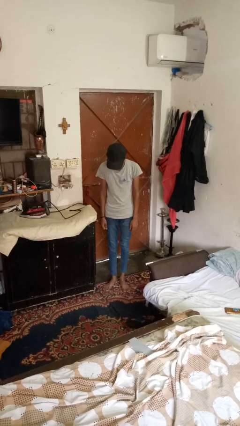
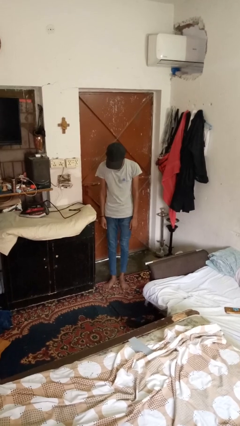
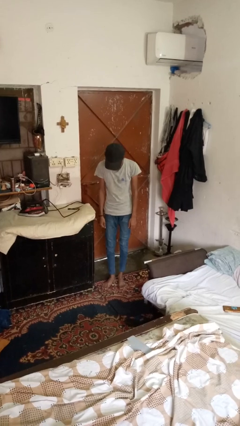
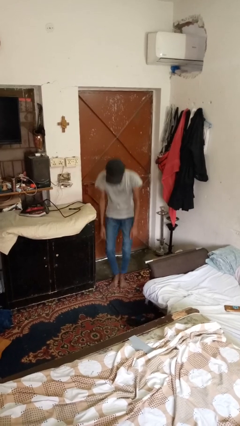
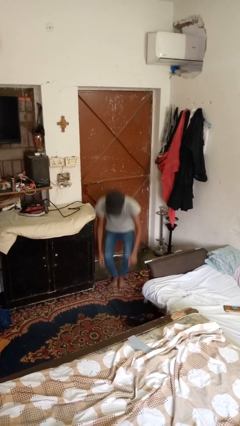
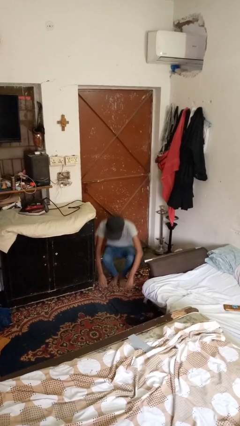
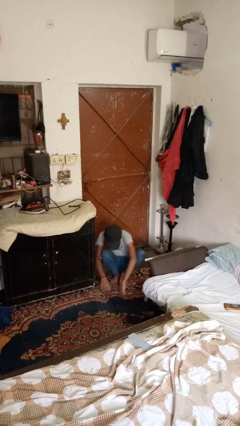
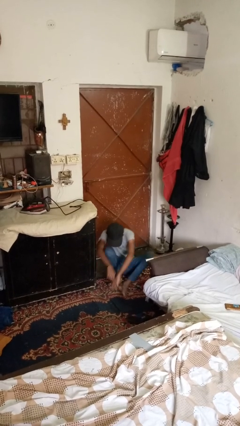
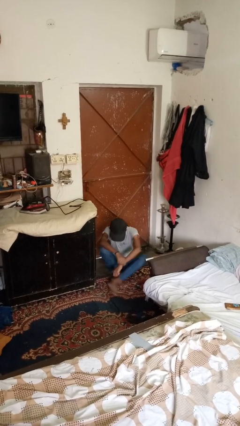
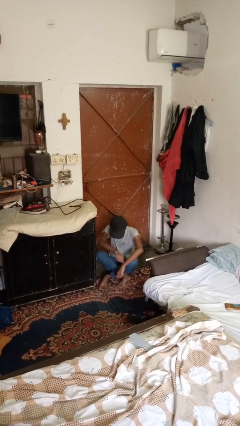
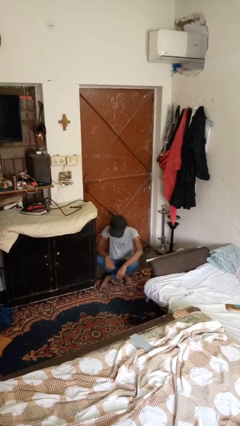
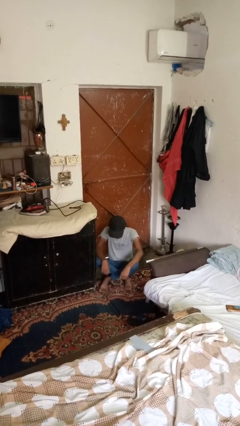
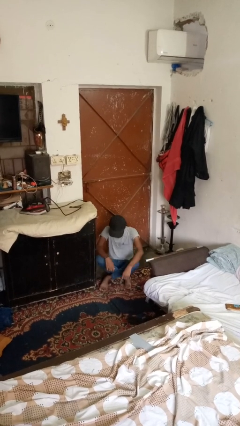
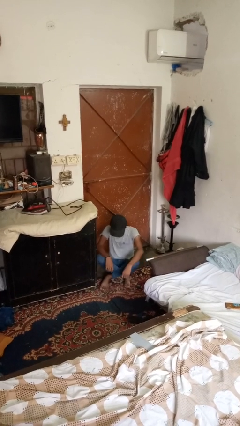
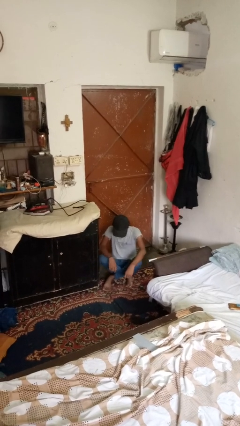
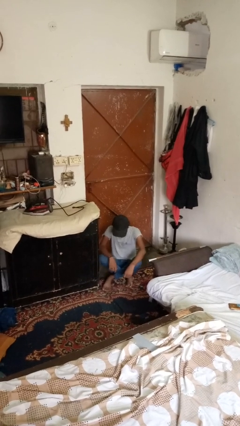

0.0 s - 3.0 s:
person sits crisscross

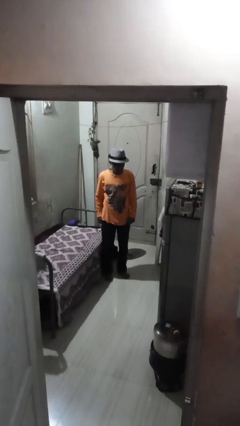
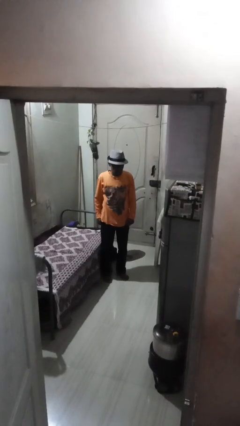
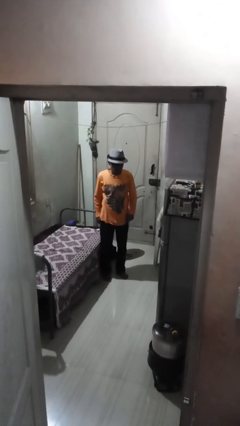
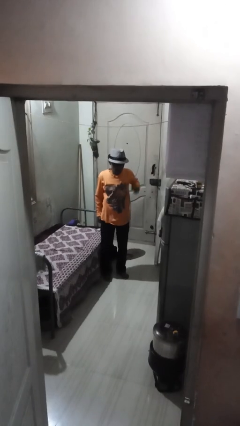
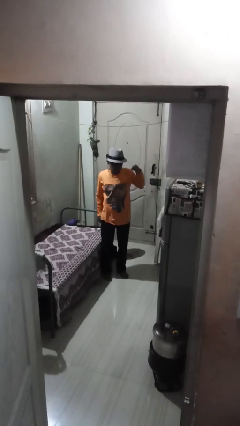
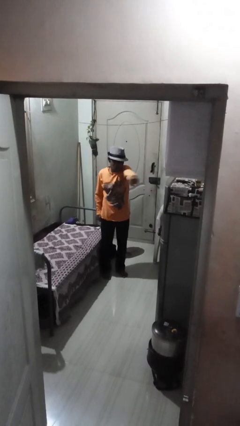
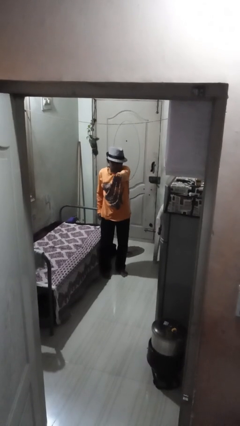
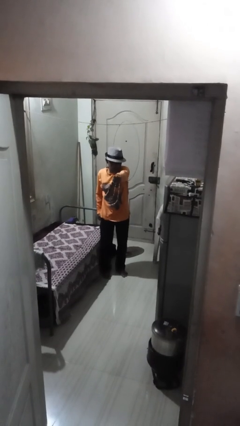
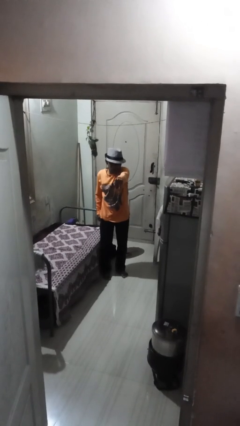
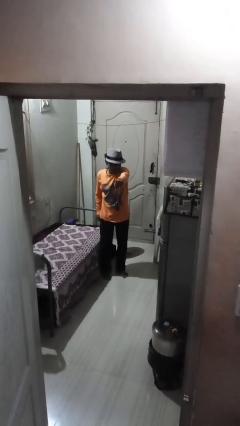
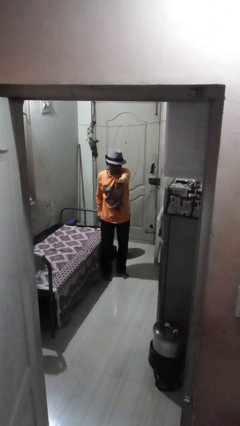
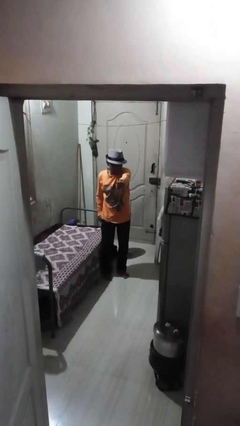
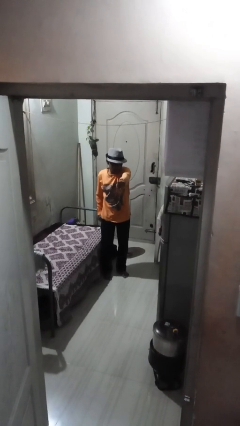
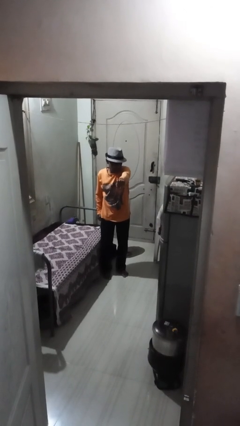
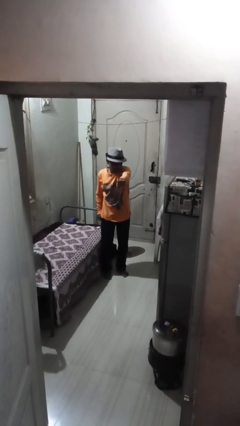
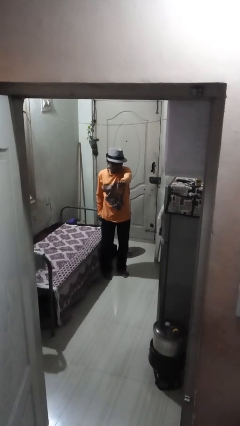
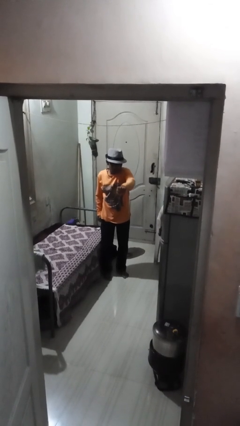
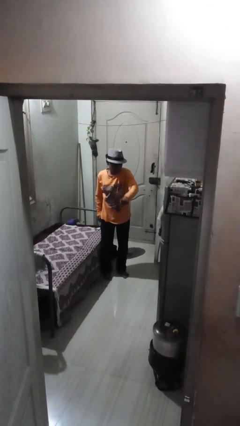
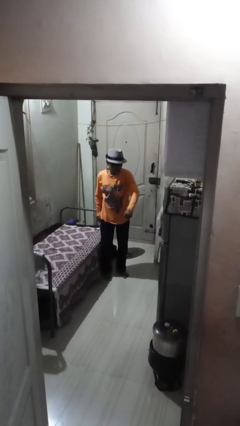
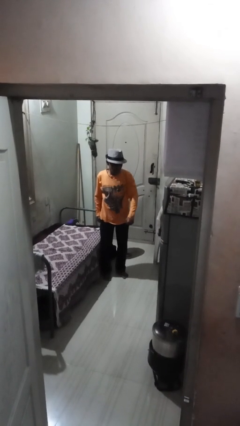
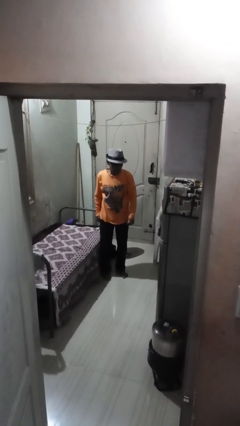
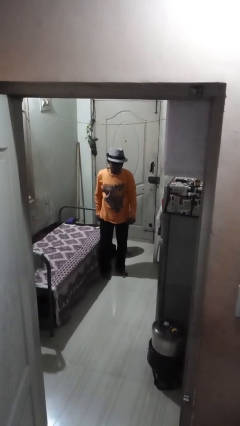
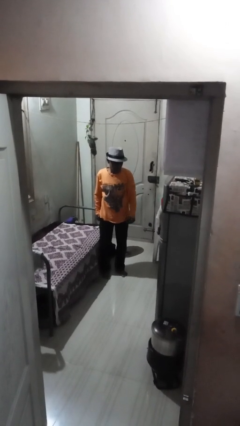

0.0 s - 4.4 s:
person punches

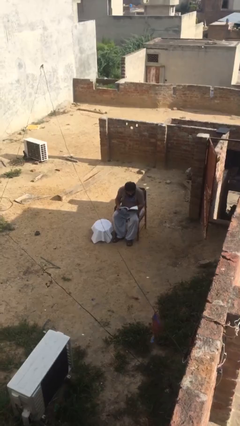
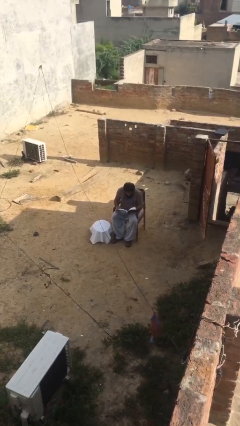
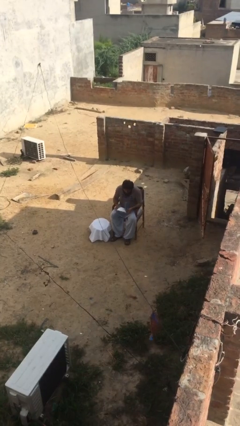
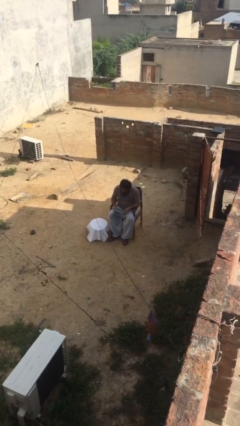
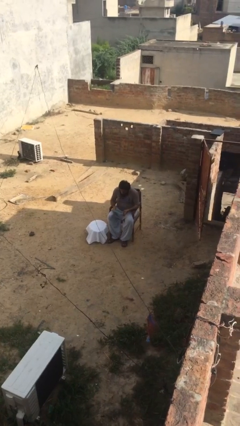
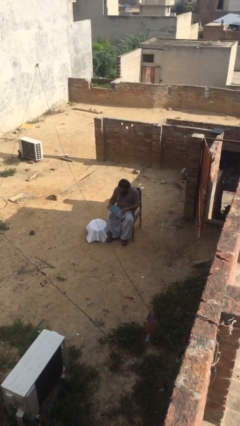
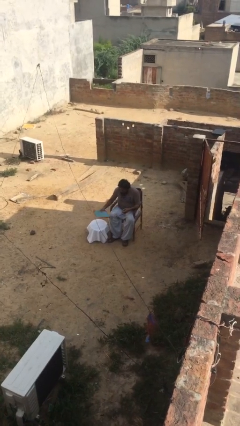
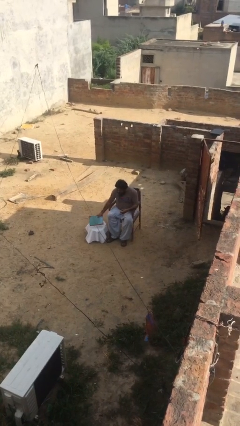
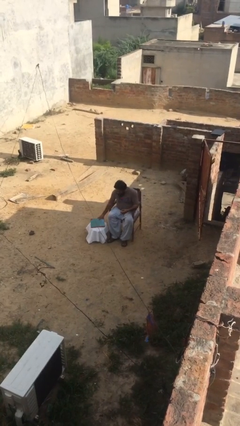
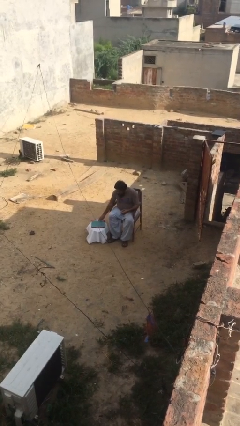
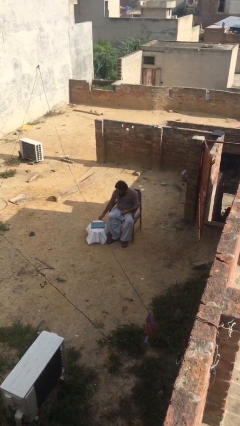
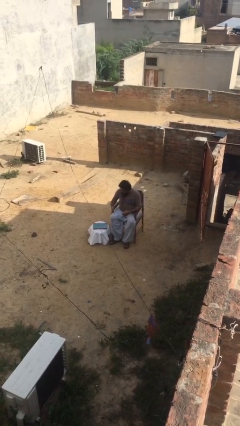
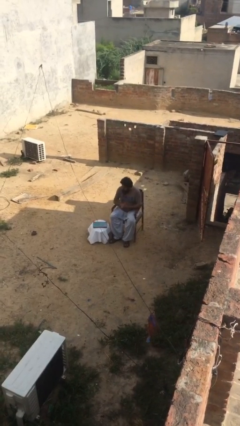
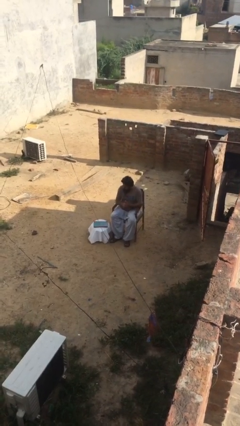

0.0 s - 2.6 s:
person puts down object on table

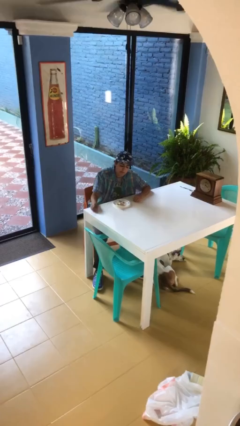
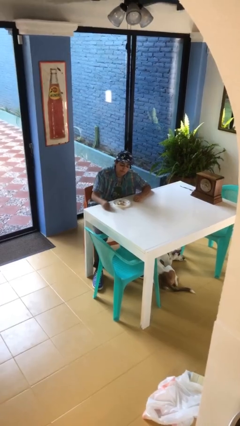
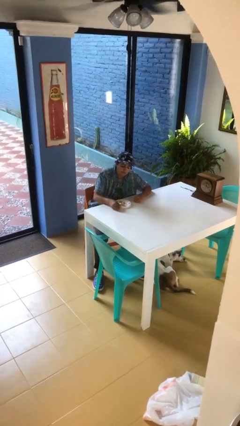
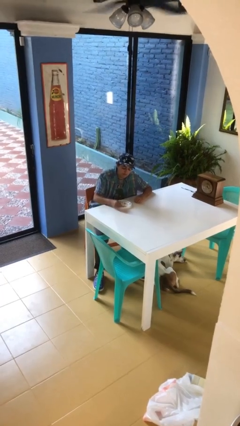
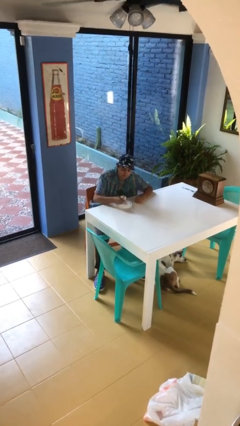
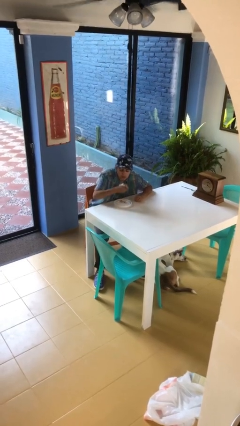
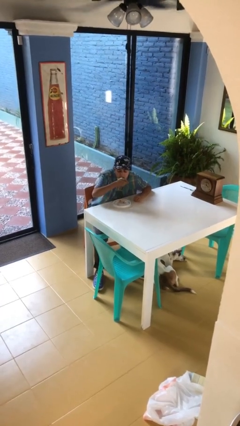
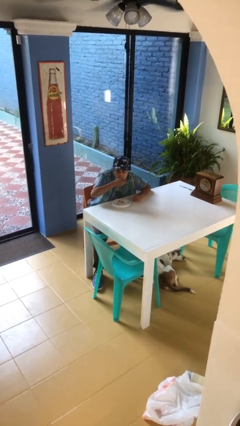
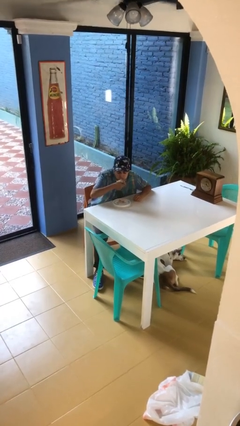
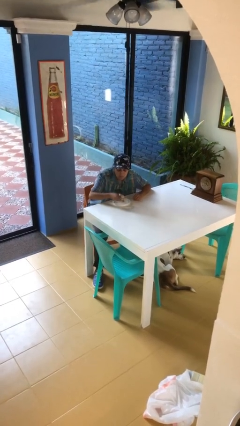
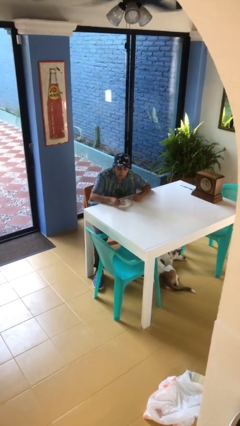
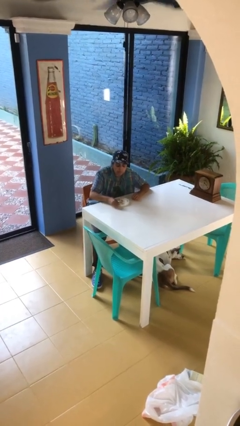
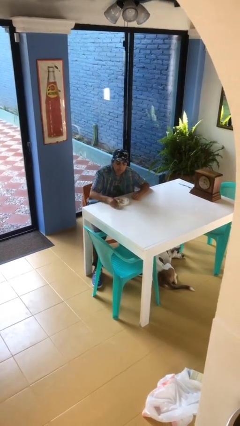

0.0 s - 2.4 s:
person eats with hands

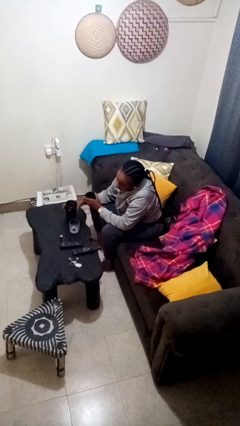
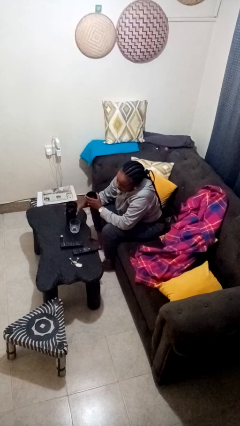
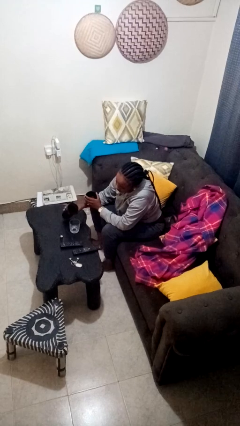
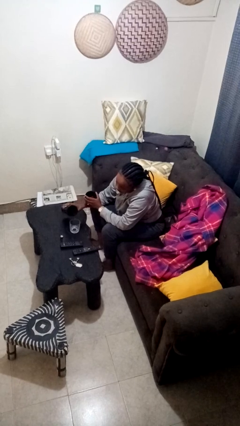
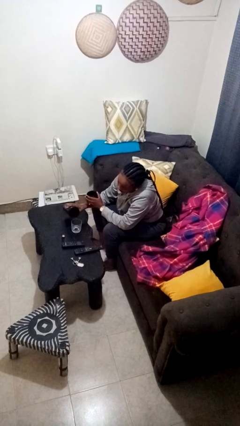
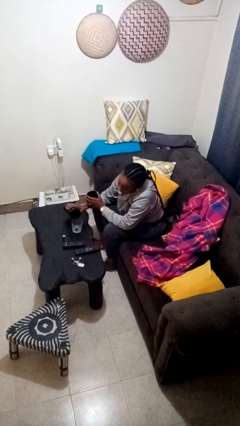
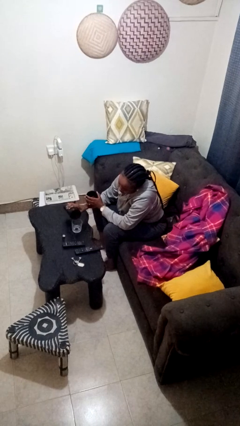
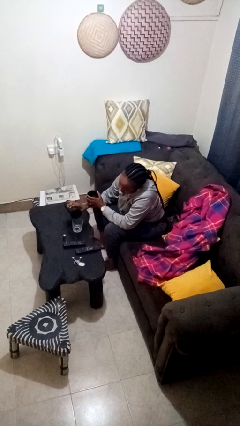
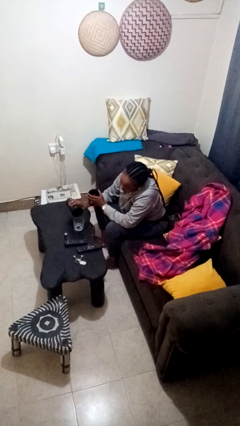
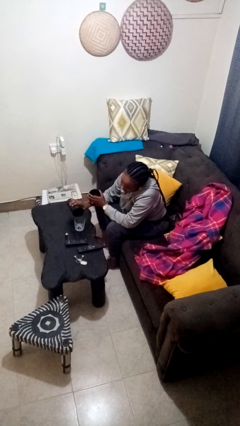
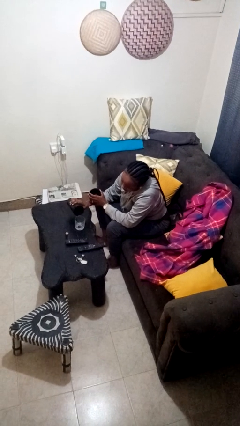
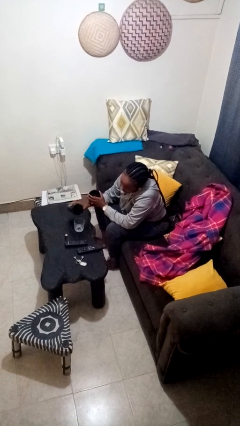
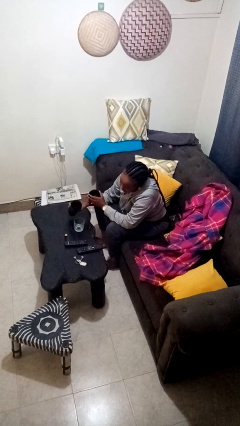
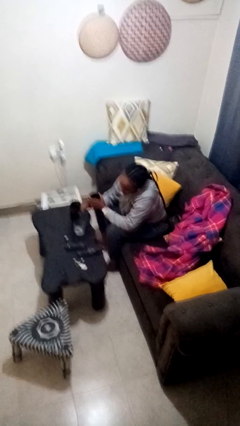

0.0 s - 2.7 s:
person pours liquid into cup

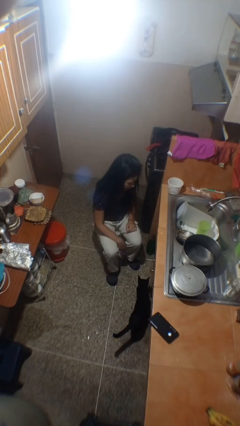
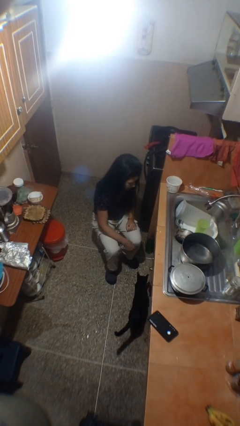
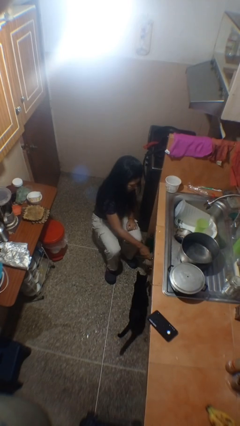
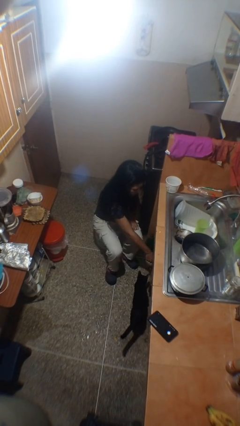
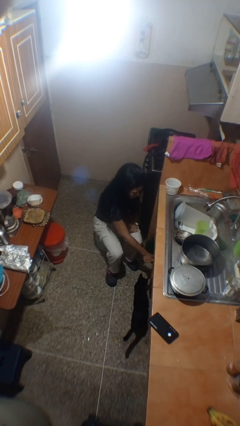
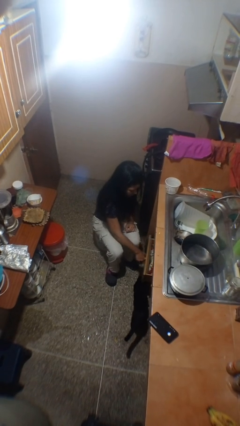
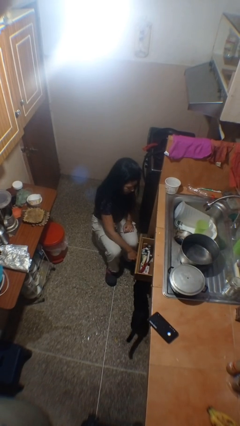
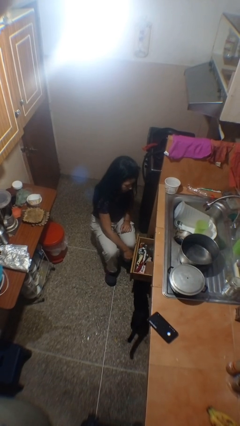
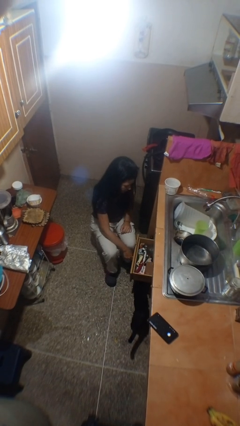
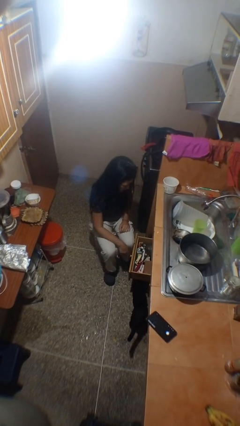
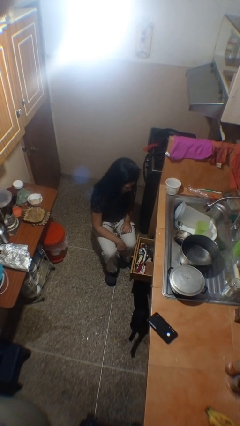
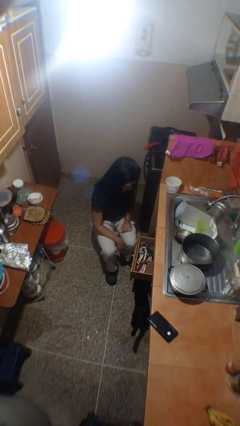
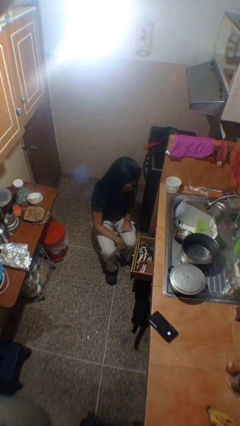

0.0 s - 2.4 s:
person opens kitchen drawer
